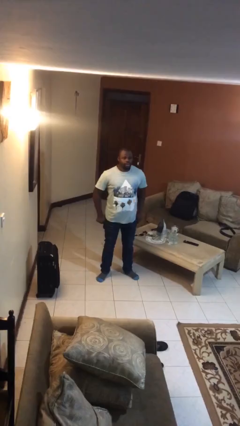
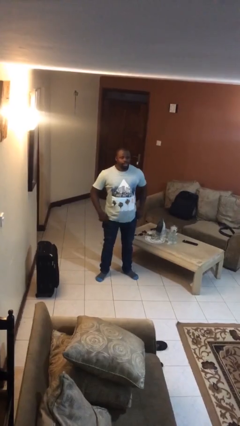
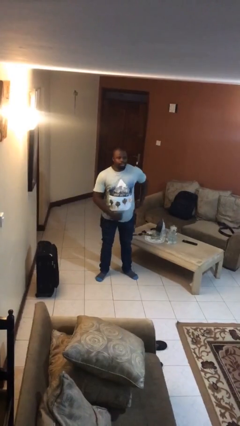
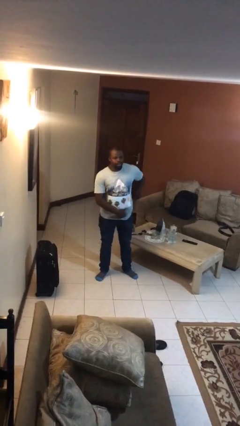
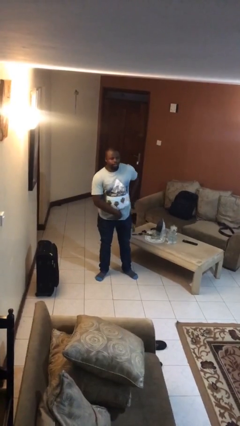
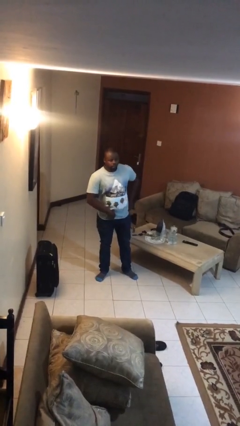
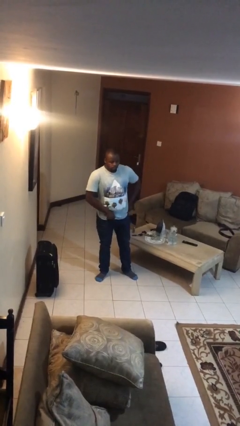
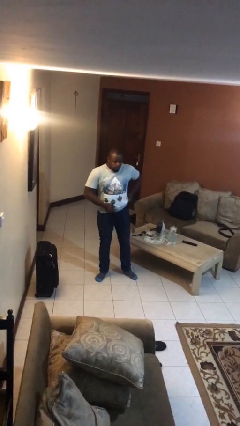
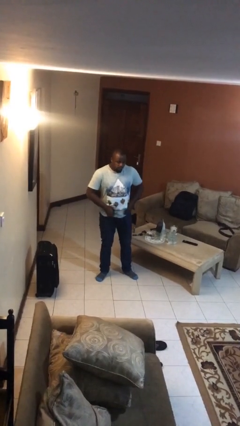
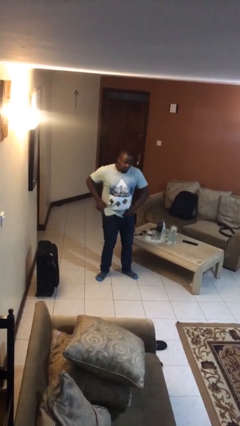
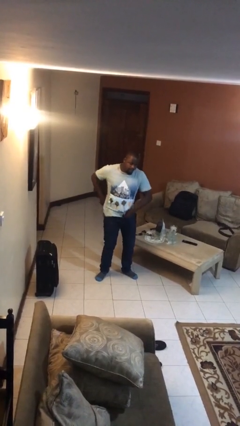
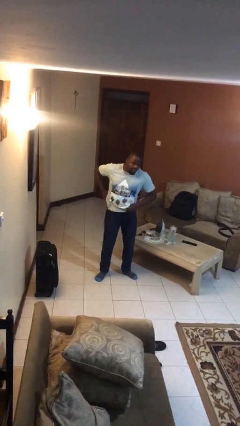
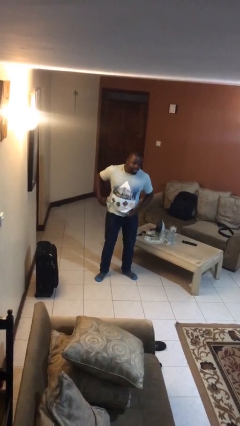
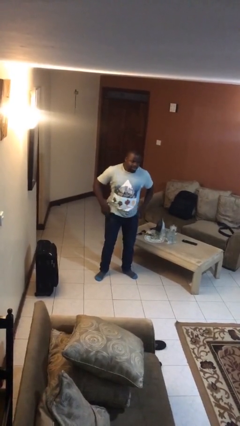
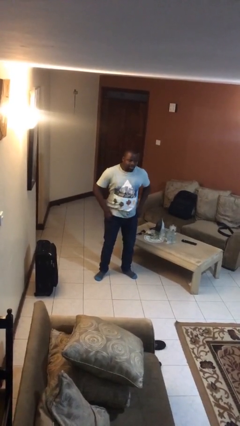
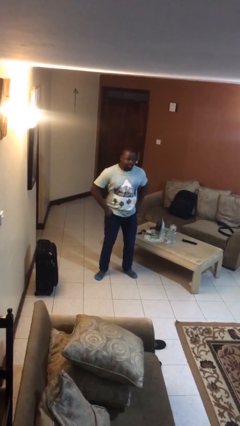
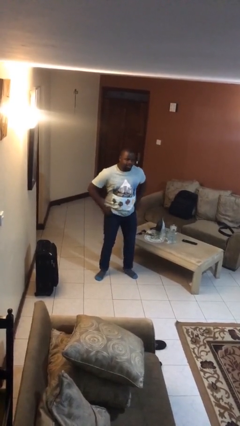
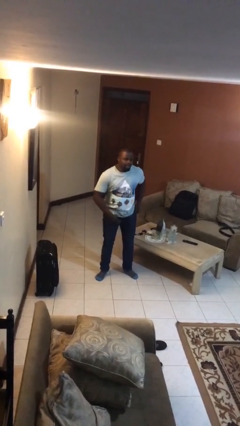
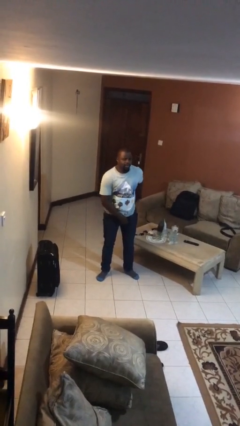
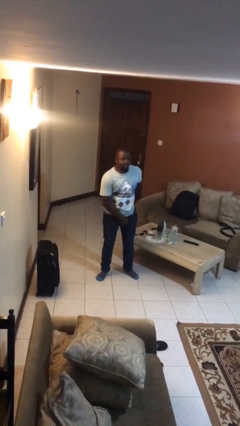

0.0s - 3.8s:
person hikes up pants

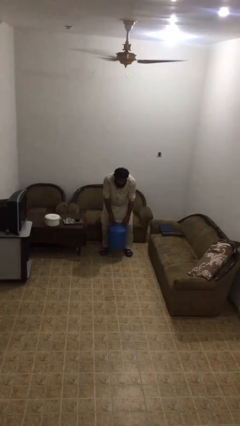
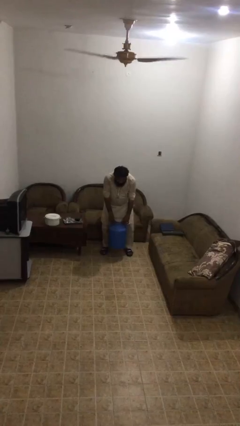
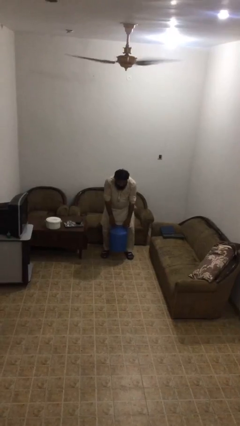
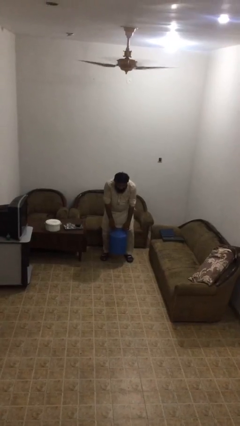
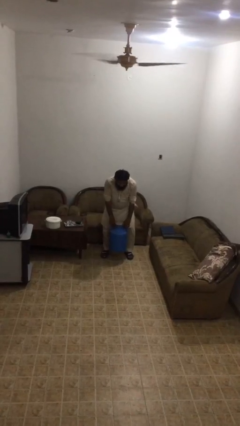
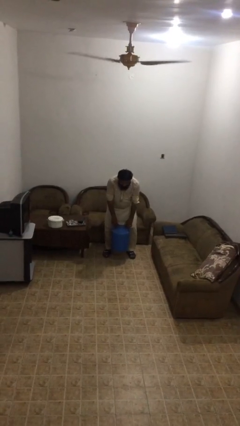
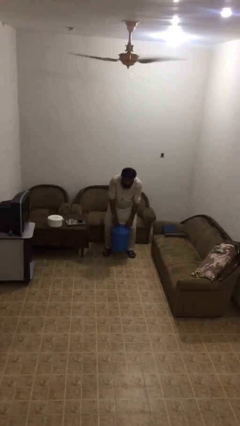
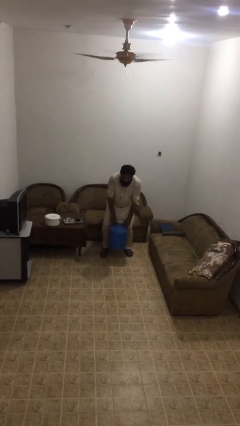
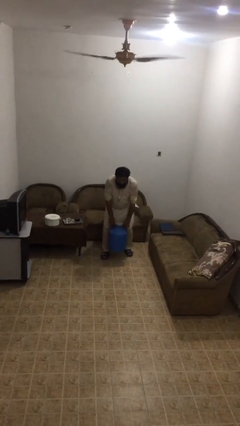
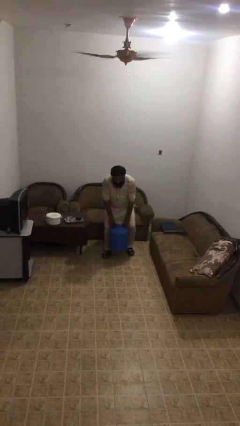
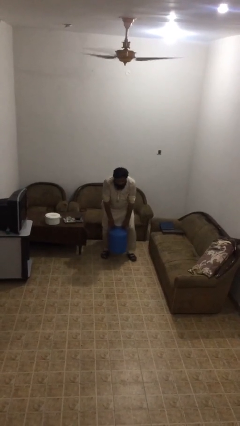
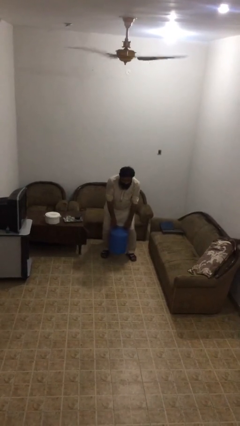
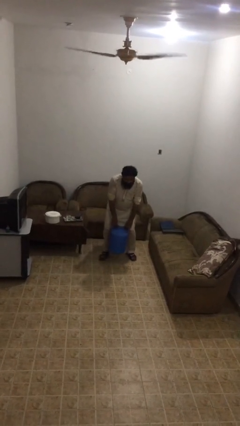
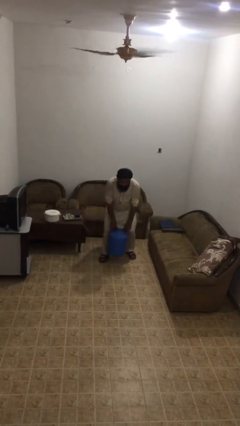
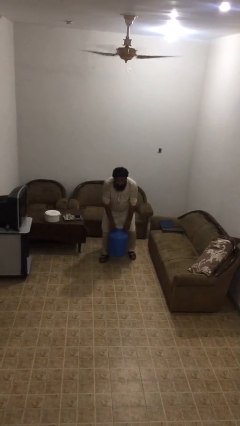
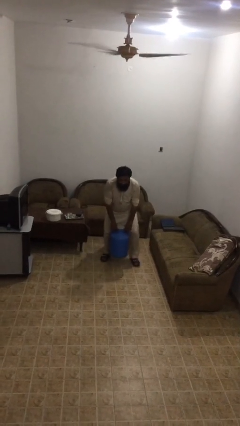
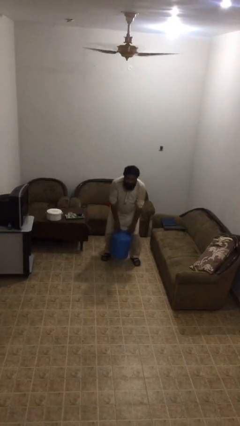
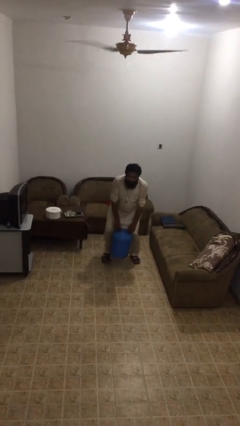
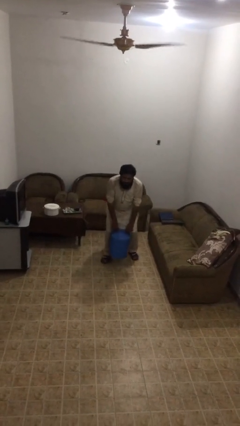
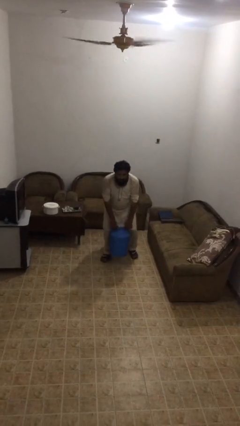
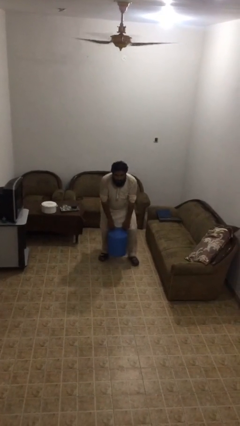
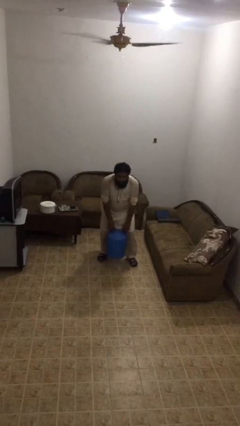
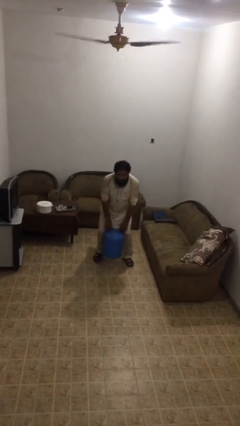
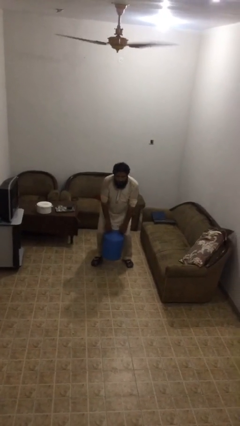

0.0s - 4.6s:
person carries heavy object

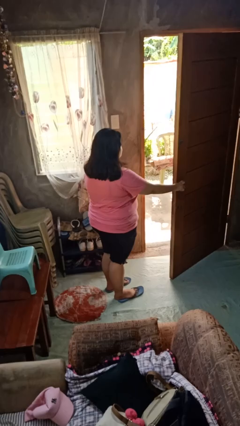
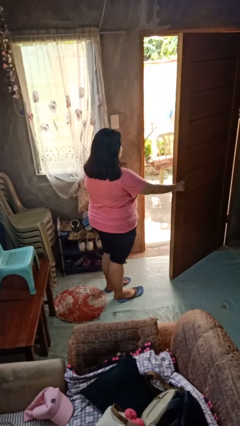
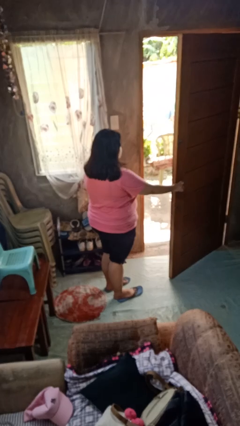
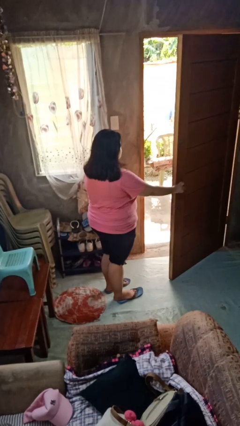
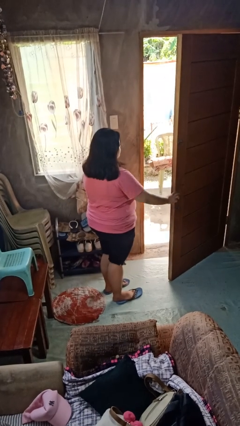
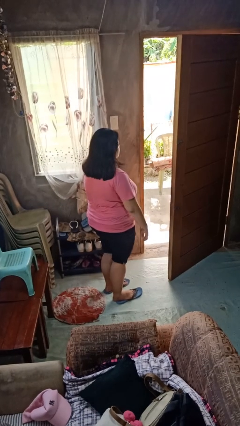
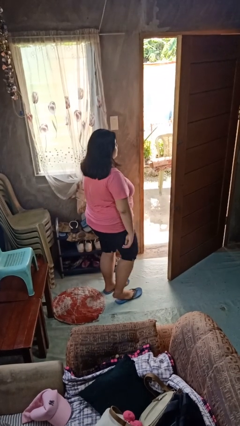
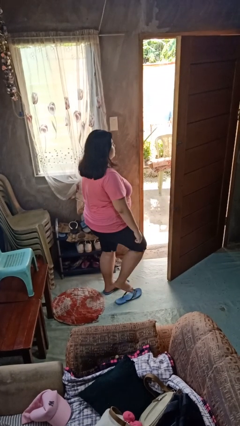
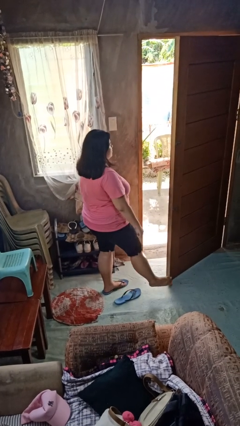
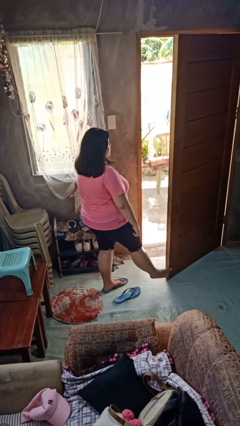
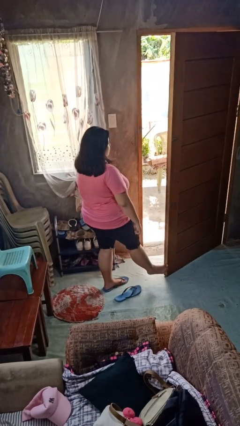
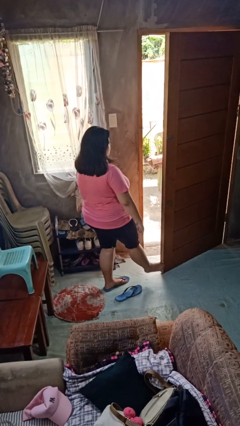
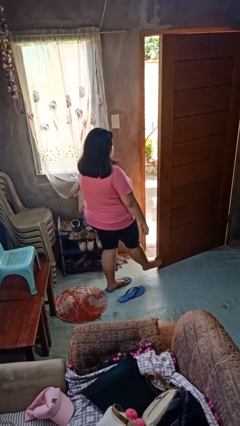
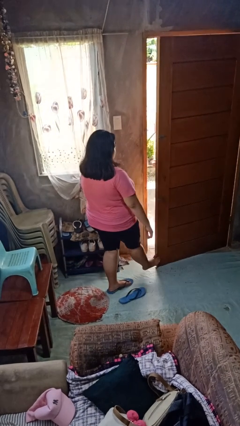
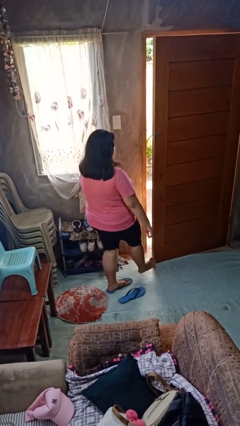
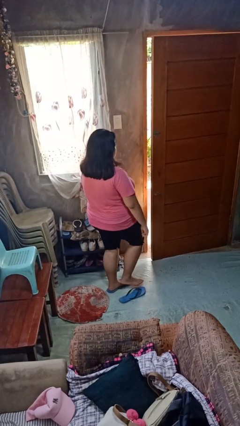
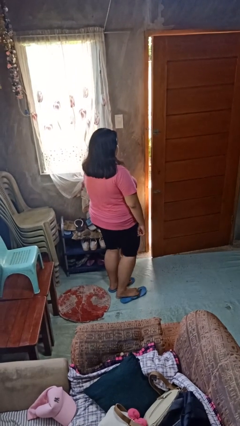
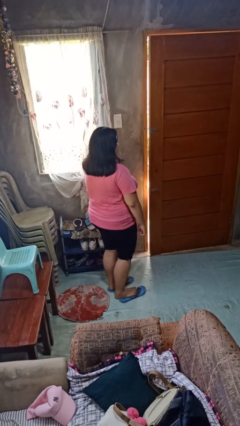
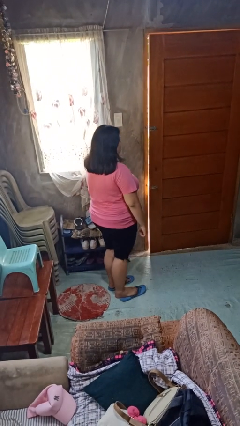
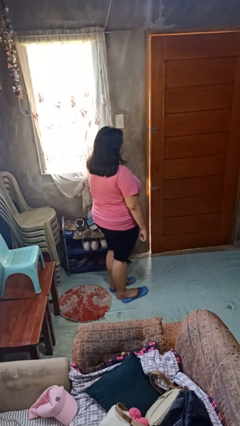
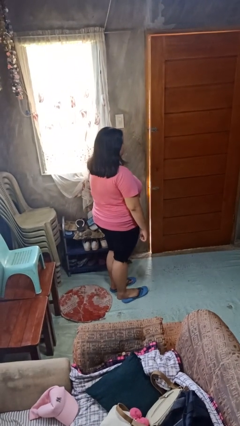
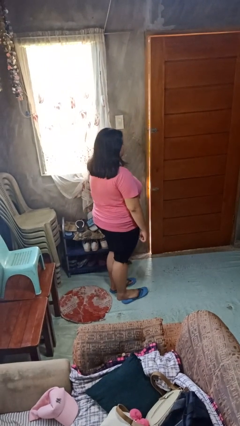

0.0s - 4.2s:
person closes door with foot

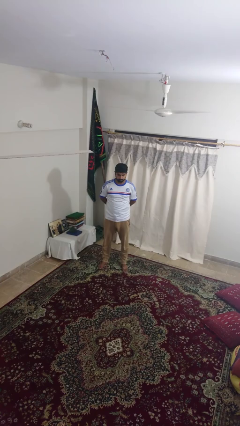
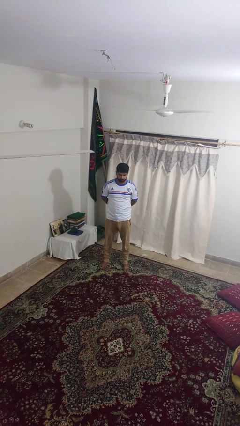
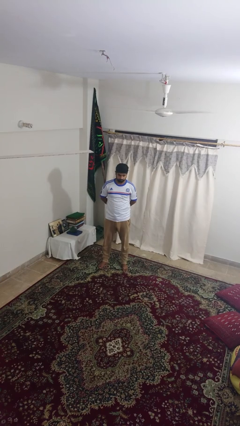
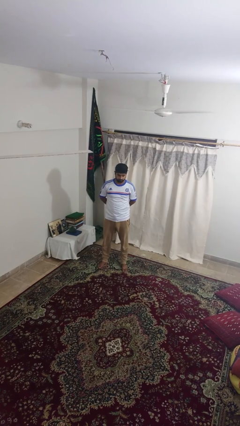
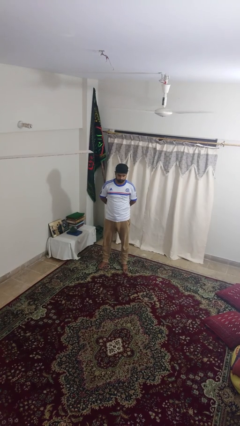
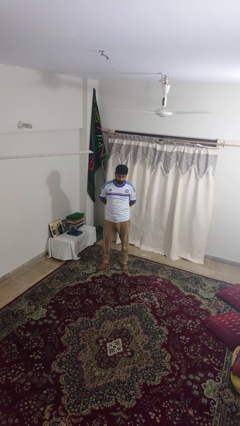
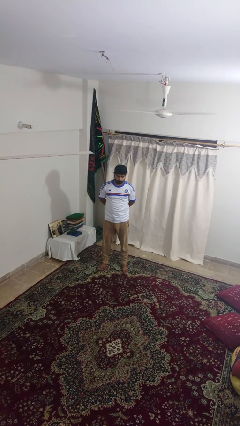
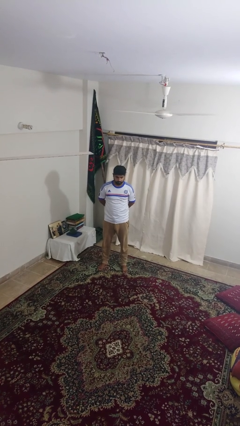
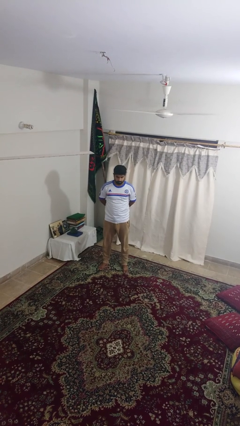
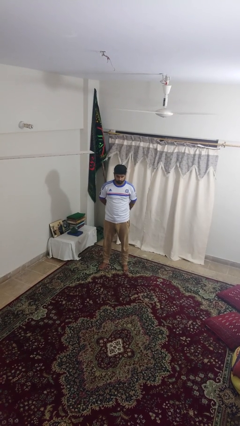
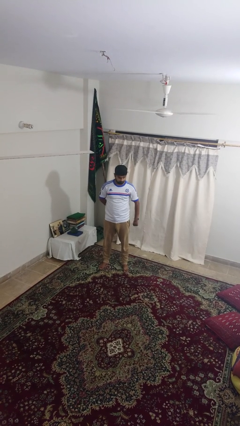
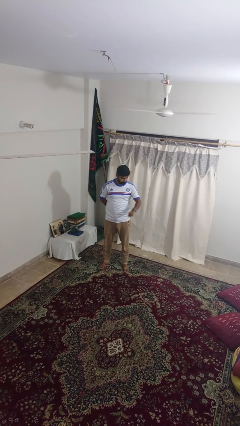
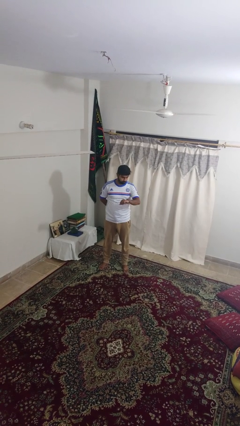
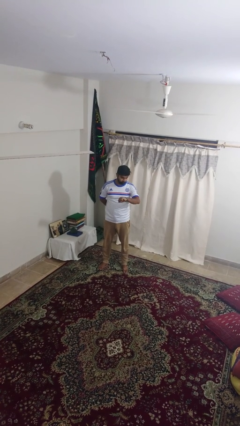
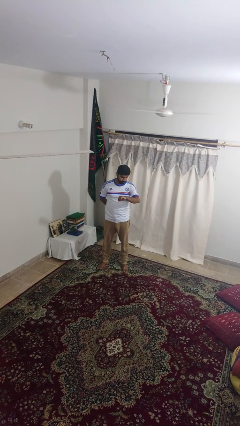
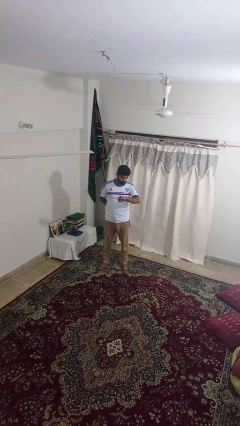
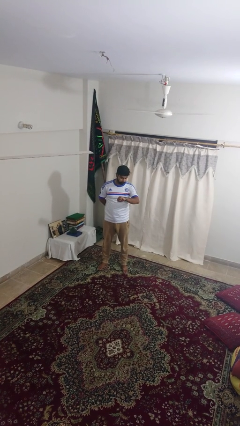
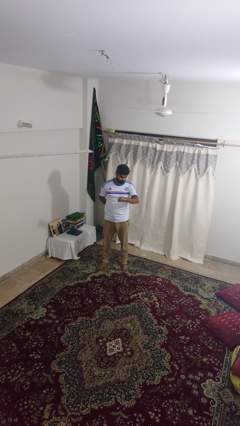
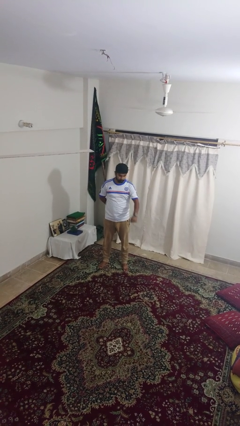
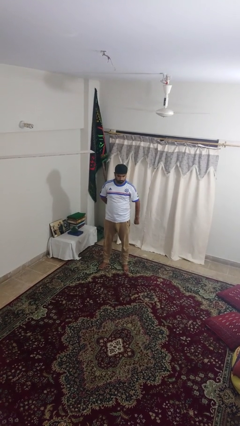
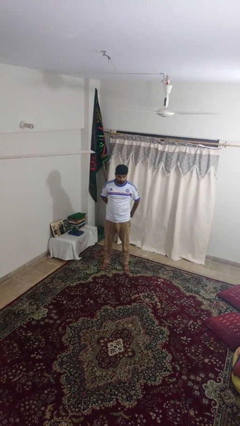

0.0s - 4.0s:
person looks at wristwatch

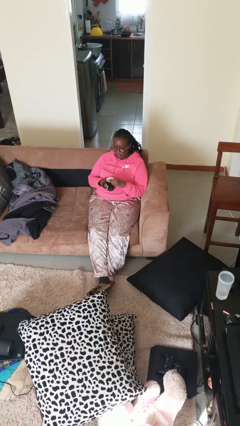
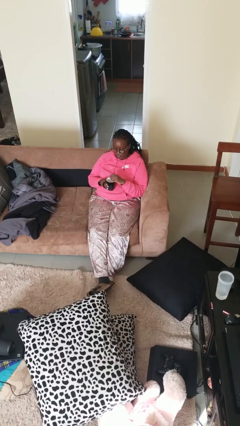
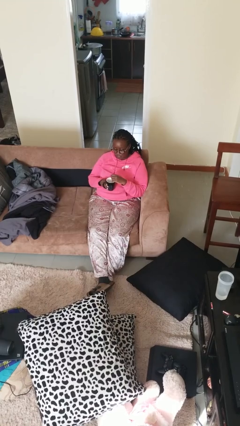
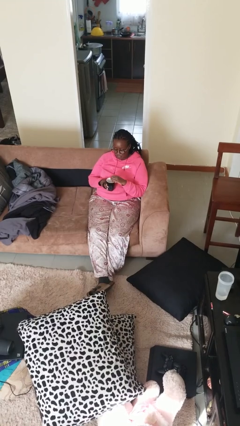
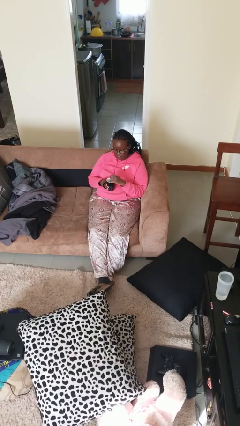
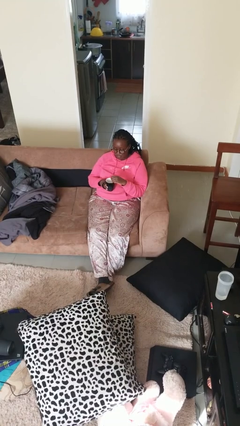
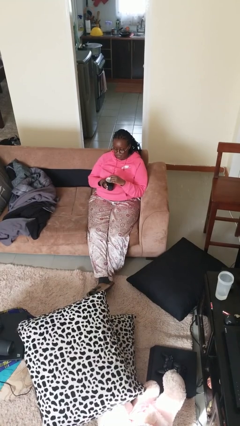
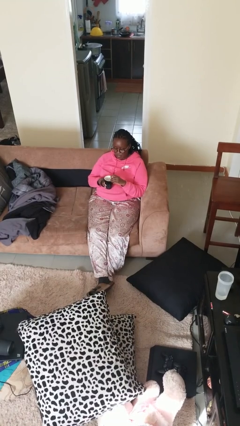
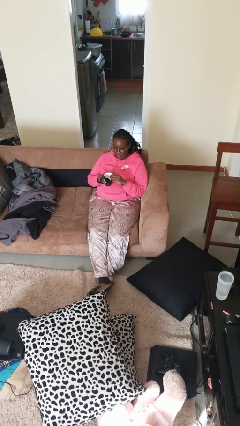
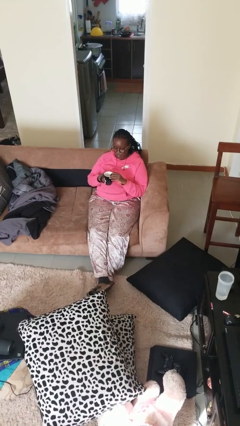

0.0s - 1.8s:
person stirs mug
